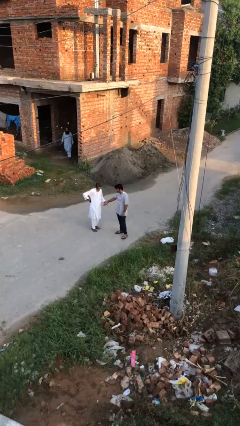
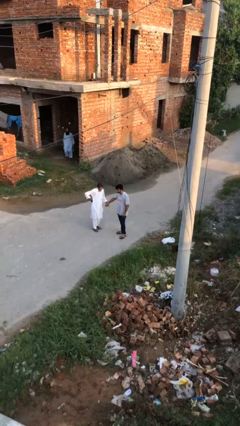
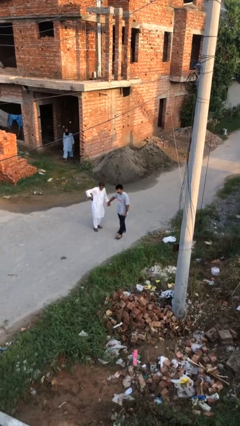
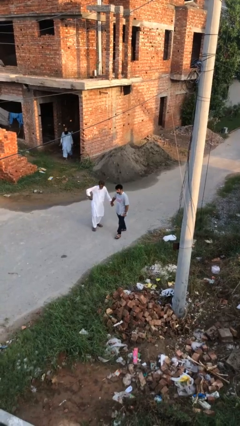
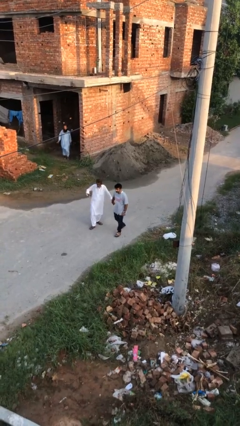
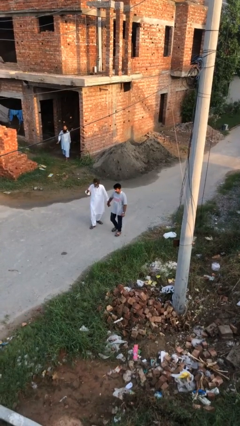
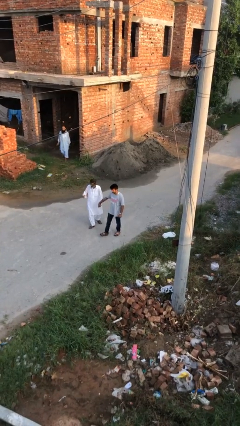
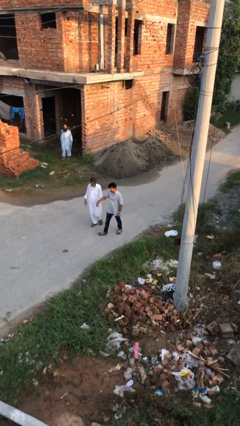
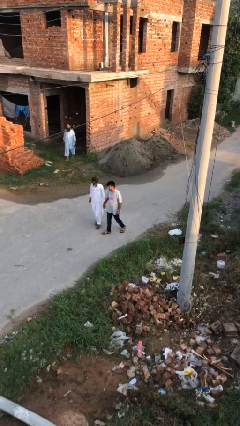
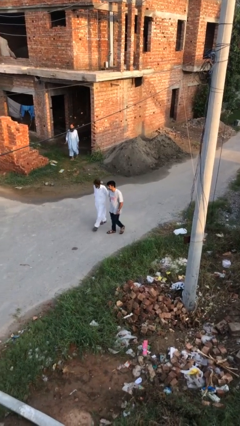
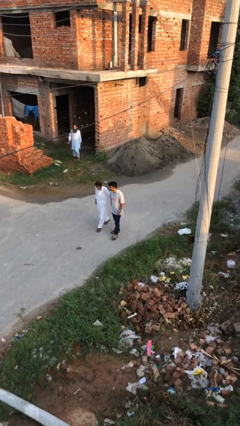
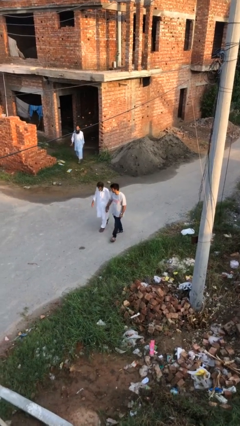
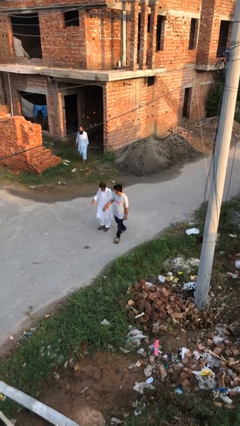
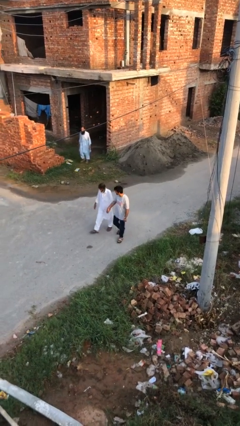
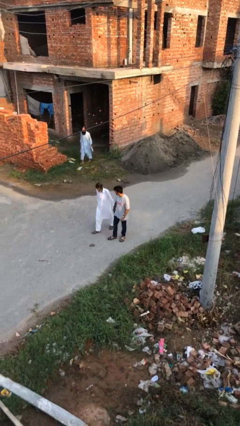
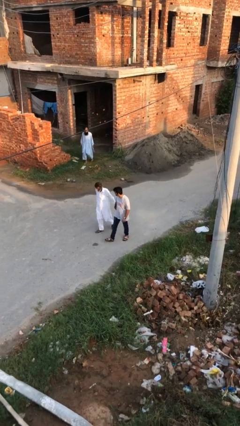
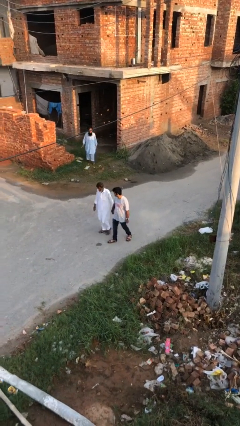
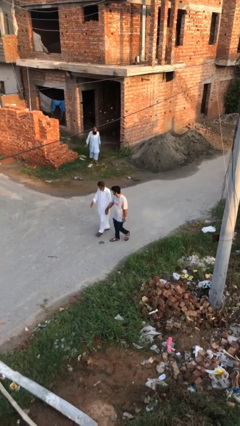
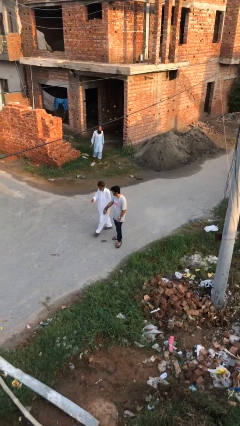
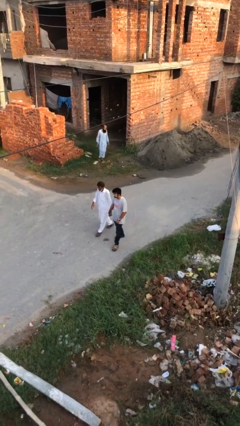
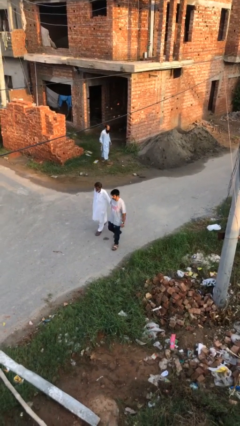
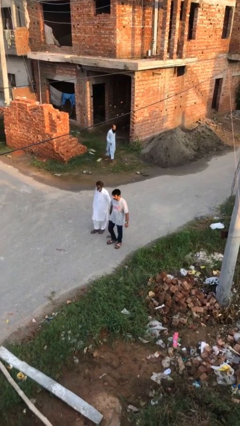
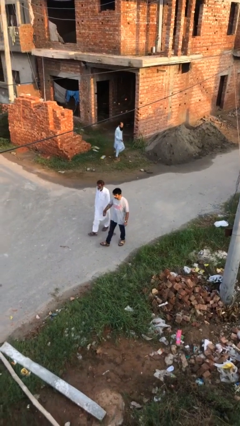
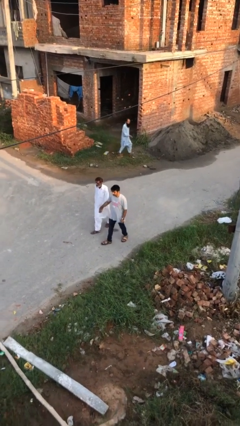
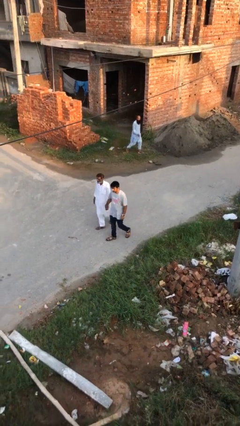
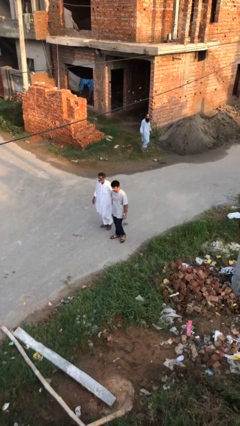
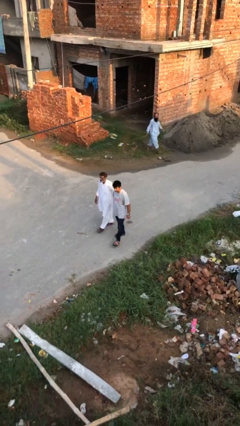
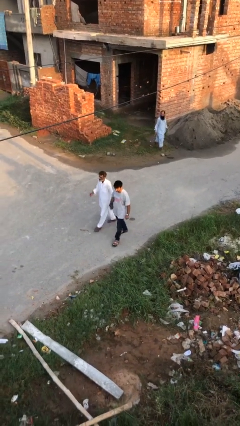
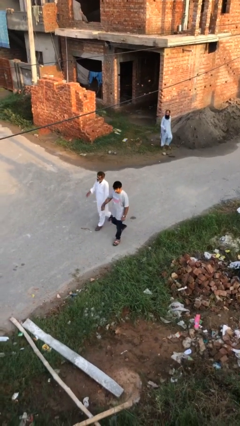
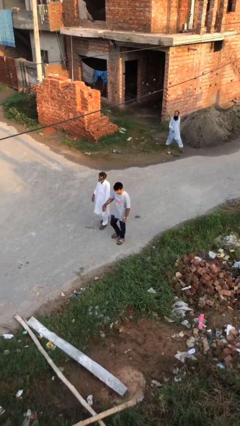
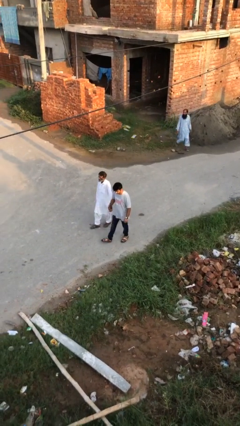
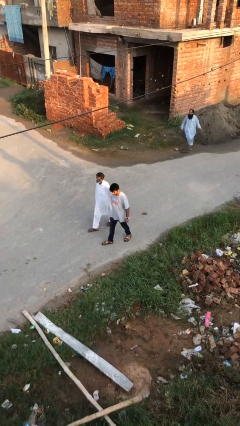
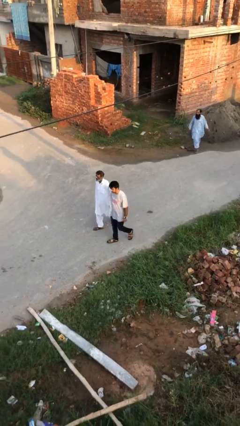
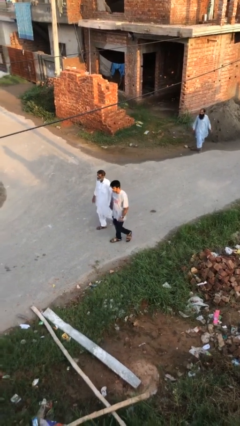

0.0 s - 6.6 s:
person holds hand

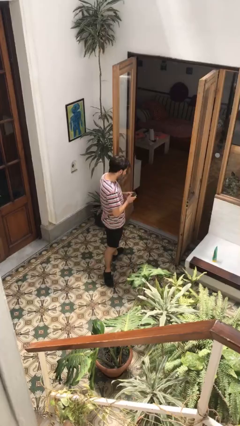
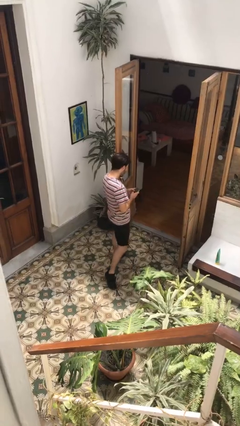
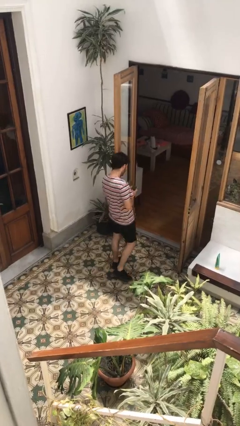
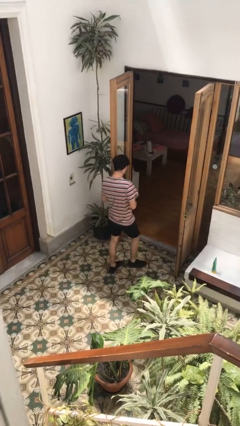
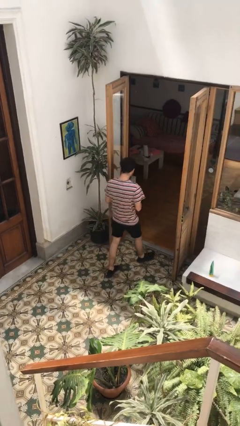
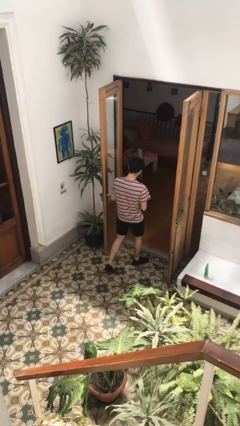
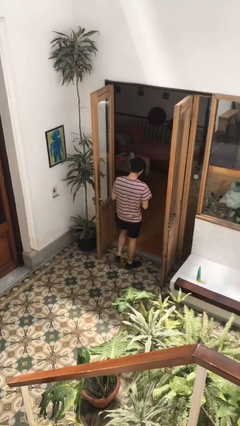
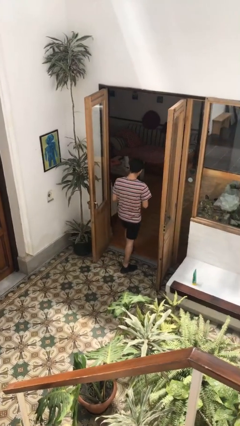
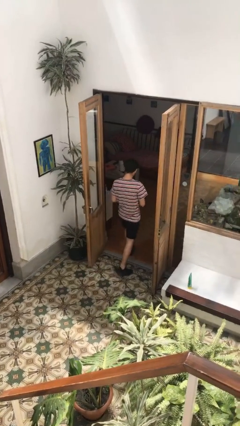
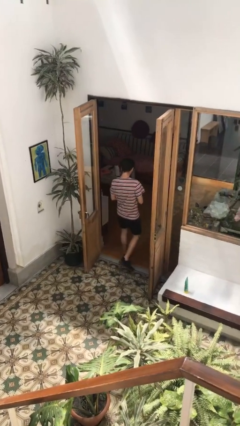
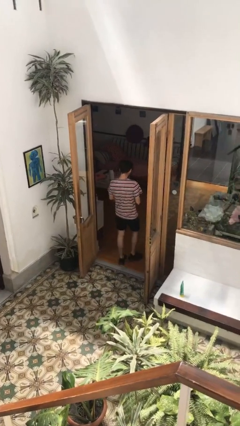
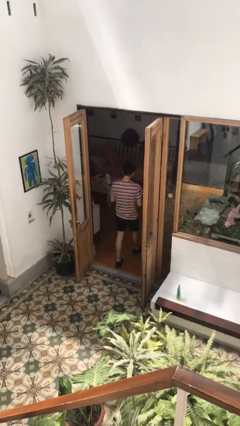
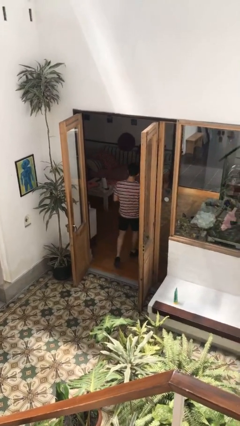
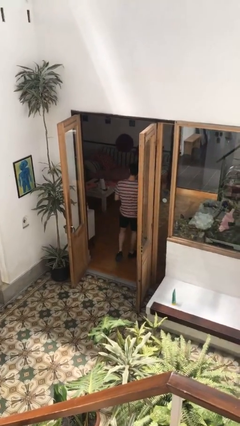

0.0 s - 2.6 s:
person exits scene through structure

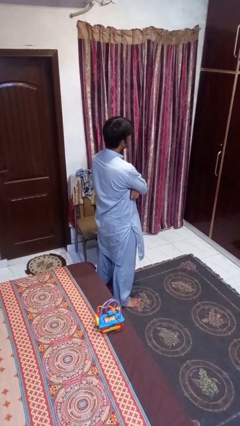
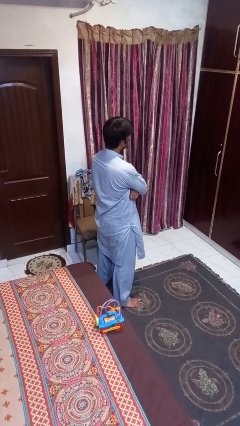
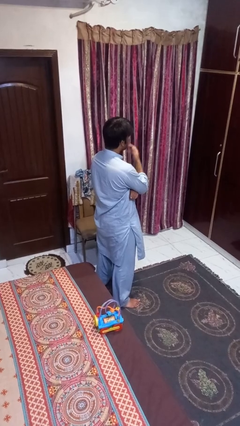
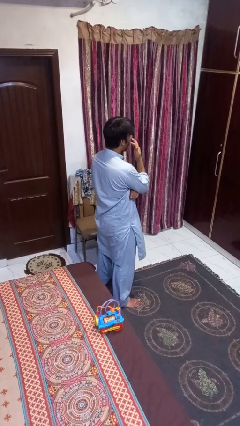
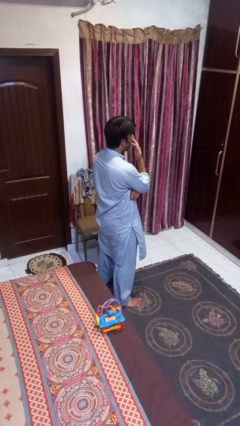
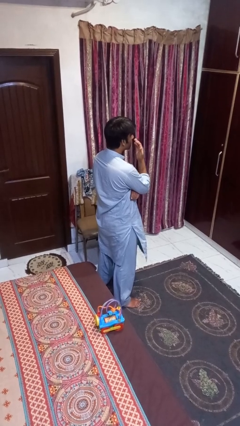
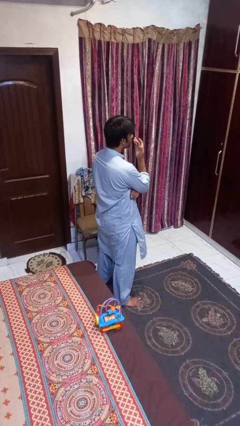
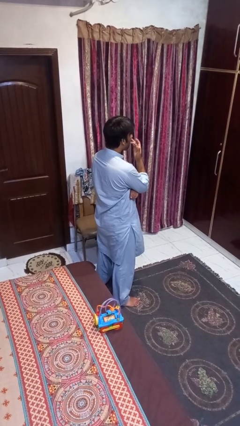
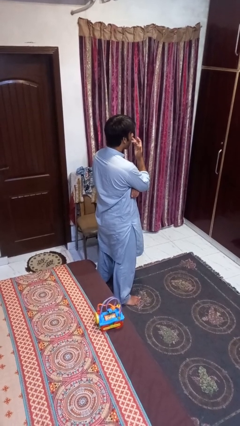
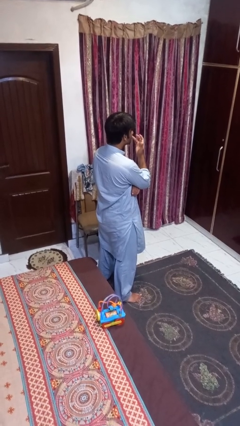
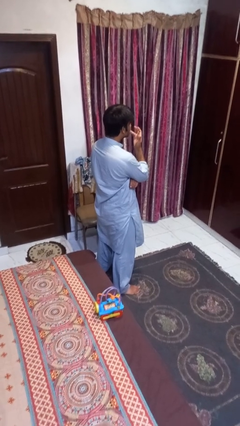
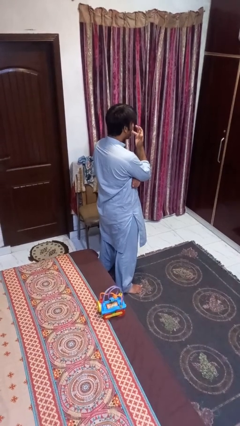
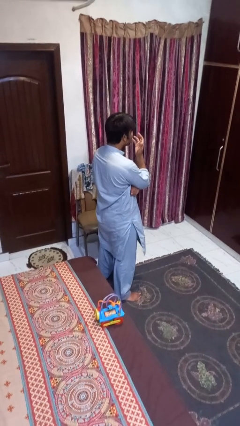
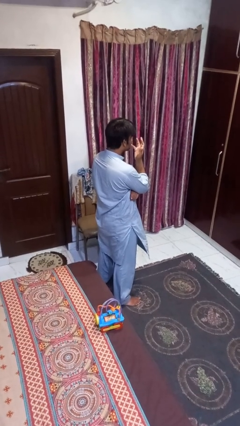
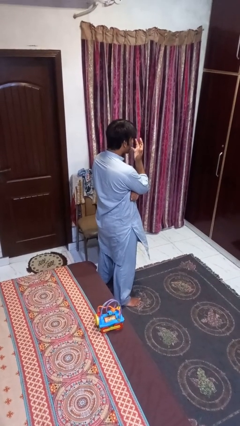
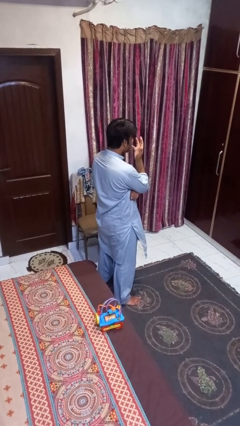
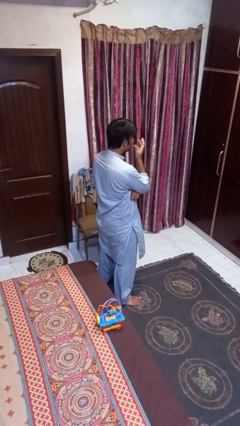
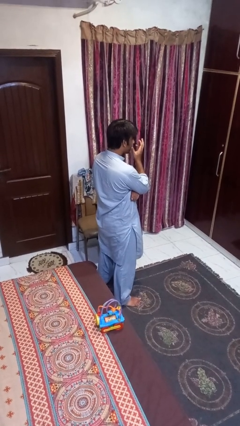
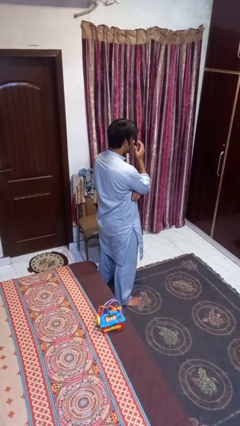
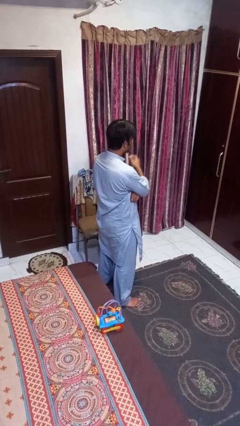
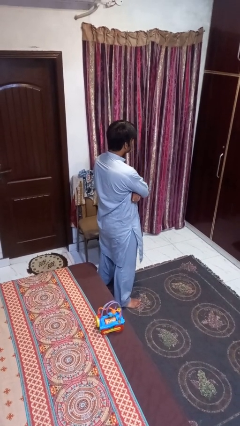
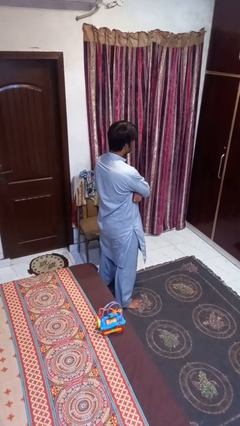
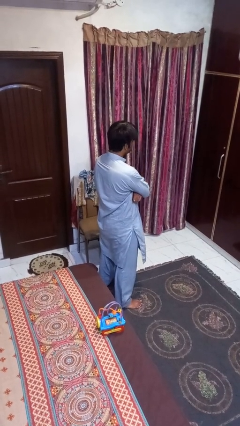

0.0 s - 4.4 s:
person licks fingers

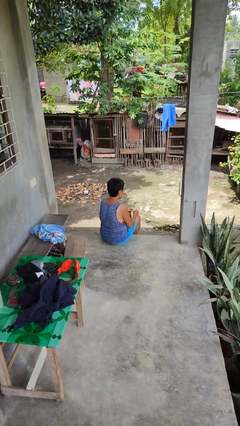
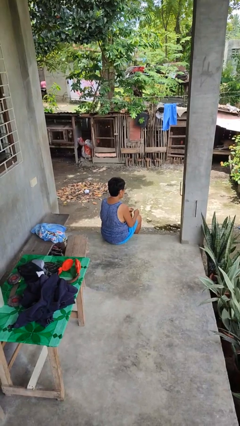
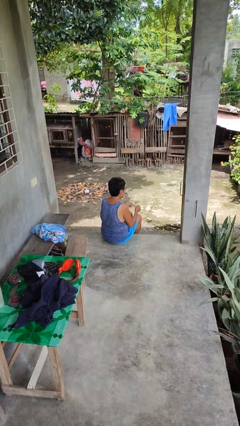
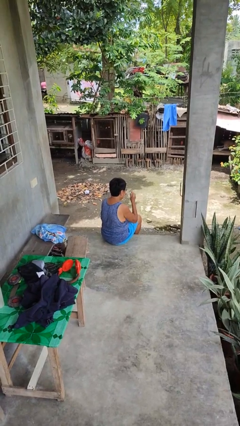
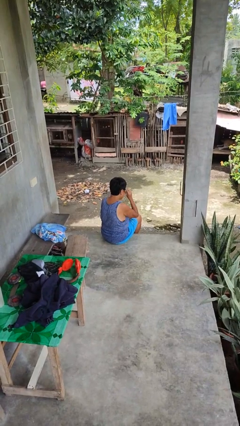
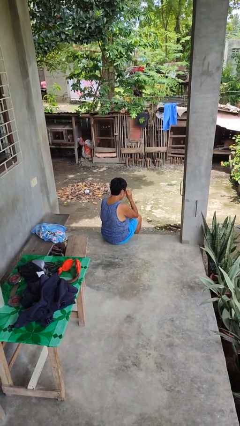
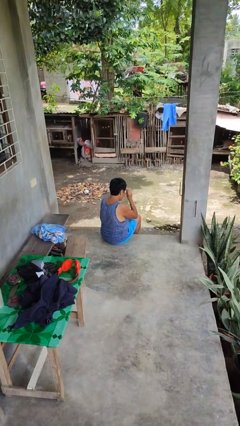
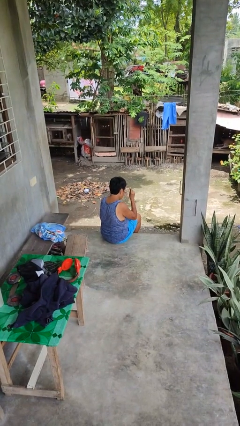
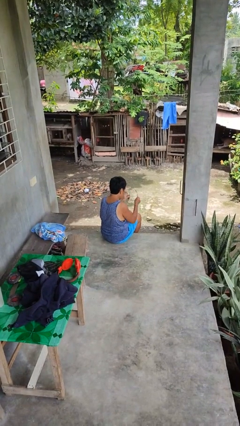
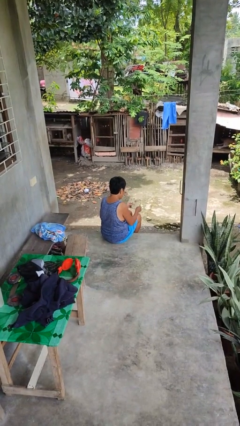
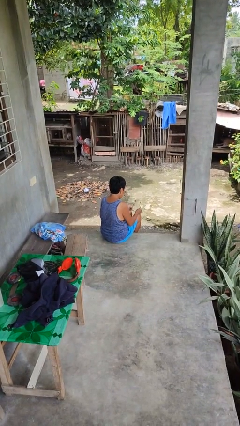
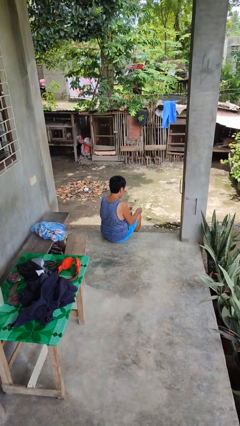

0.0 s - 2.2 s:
person takes off glasses

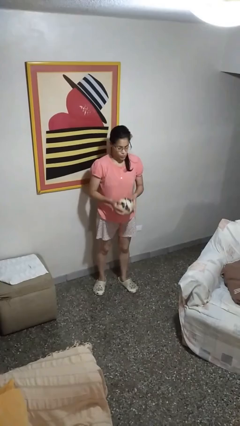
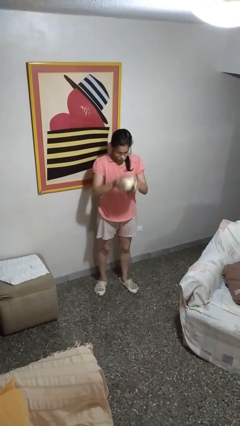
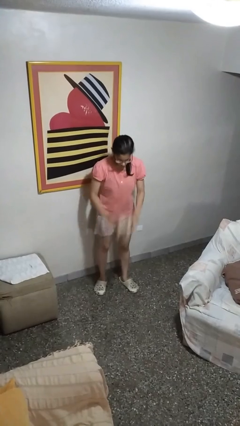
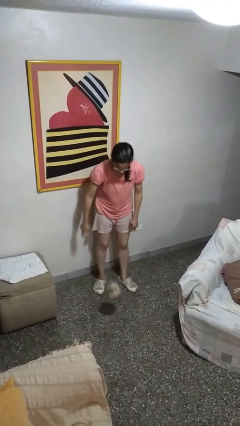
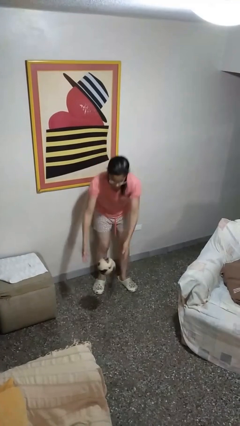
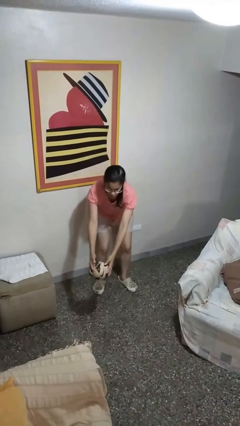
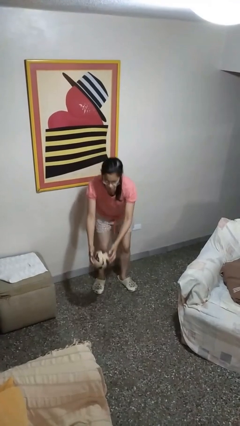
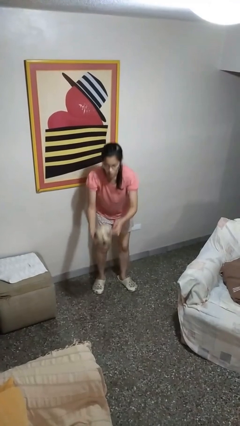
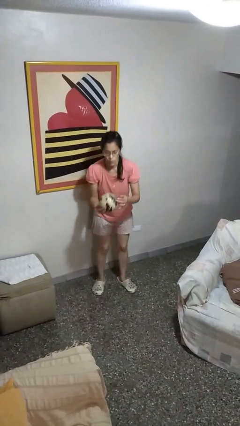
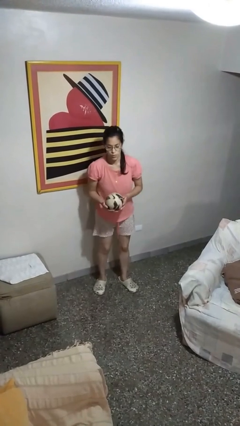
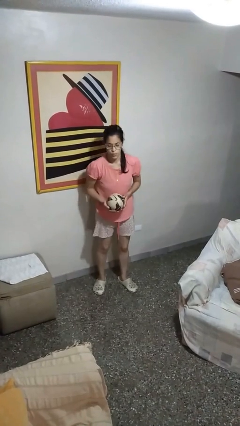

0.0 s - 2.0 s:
person bounces ball on floor
